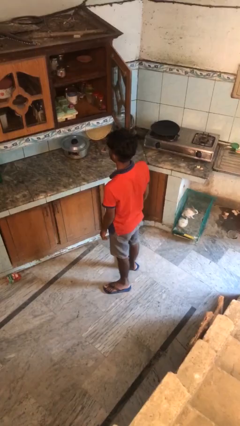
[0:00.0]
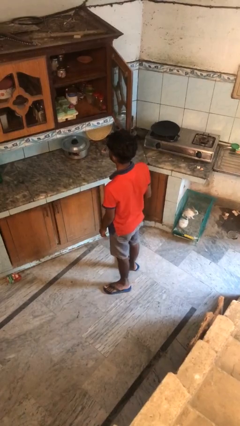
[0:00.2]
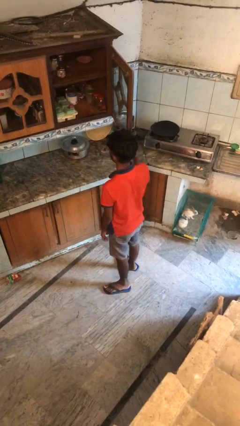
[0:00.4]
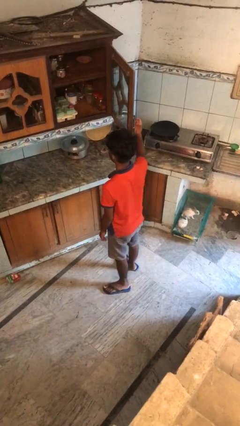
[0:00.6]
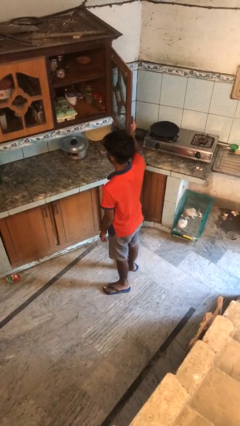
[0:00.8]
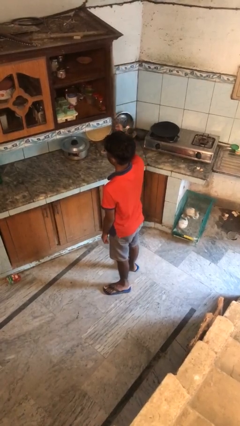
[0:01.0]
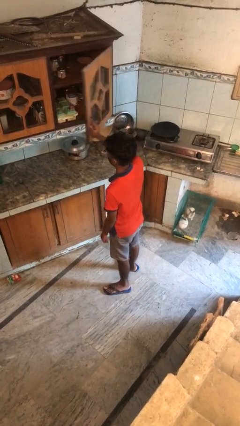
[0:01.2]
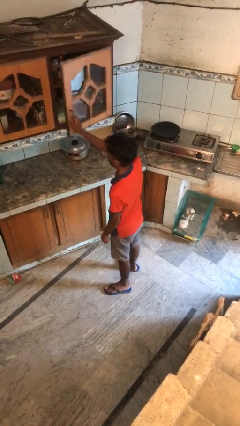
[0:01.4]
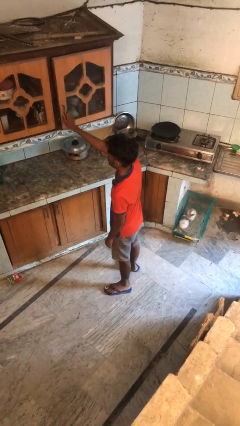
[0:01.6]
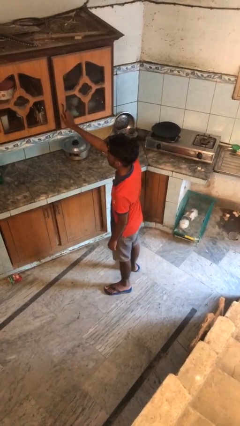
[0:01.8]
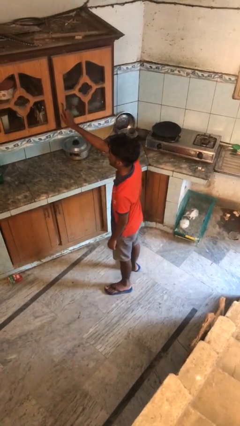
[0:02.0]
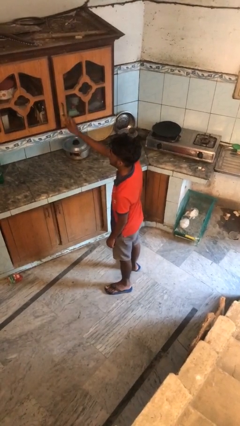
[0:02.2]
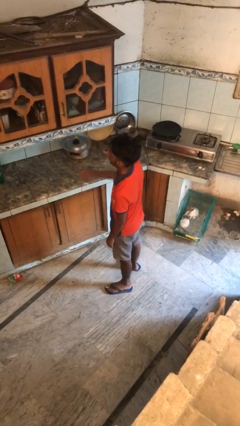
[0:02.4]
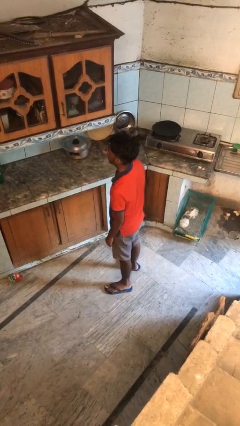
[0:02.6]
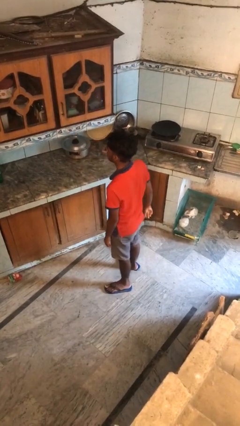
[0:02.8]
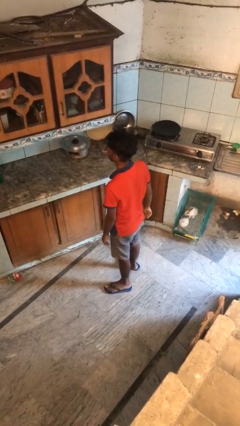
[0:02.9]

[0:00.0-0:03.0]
person closes cabinet

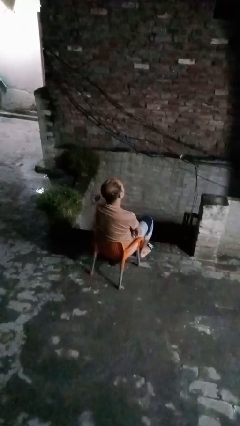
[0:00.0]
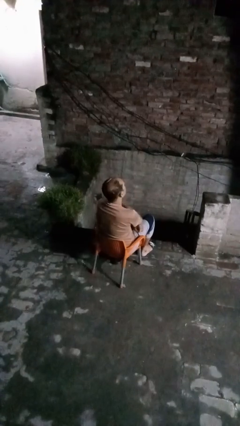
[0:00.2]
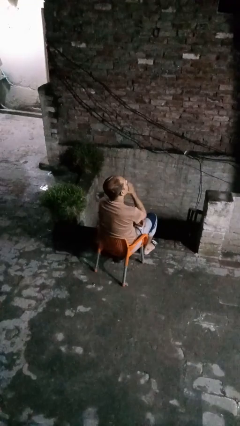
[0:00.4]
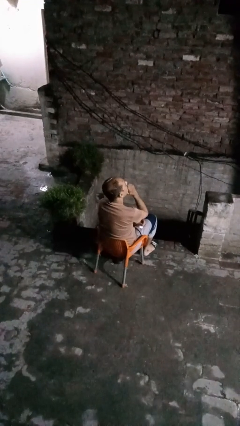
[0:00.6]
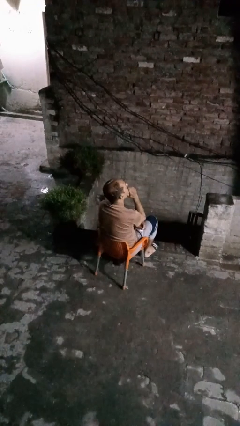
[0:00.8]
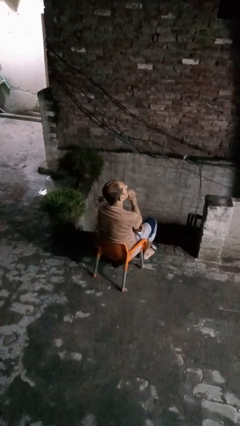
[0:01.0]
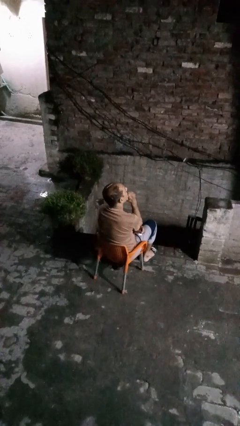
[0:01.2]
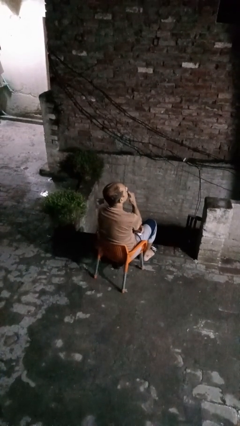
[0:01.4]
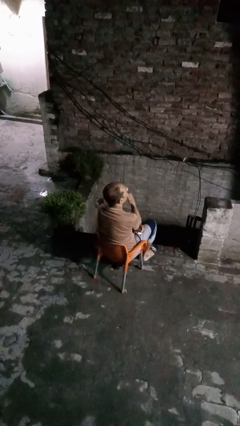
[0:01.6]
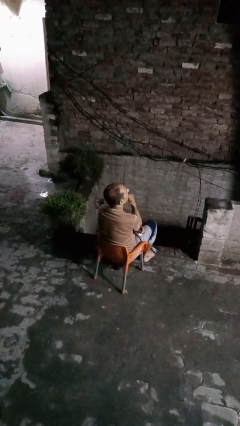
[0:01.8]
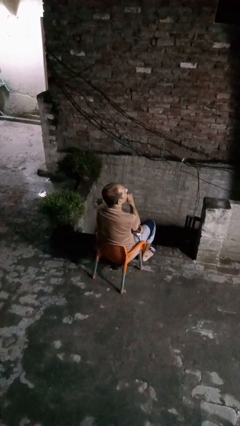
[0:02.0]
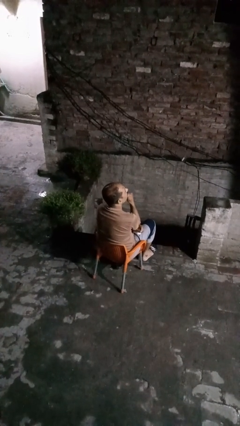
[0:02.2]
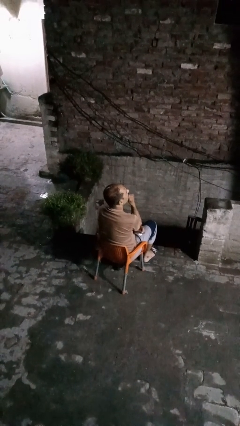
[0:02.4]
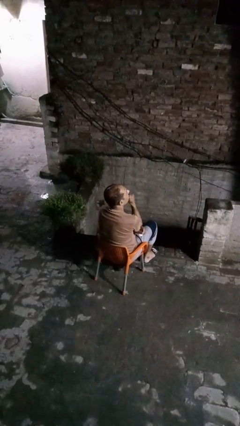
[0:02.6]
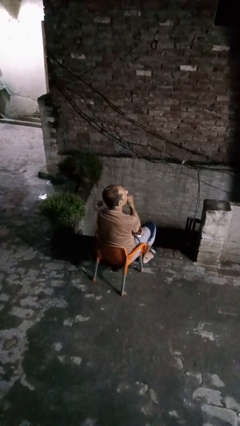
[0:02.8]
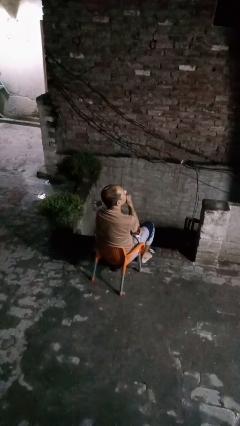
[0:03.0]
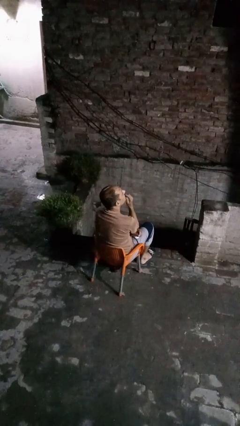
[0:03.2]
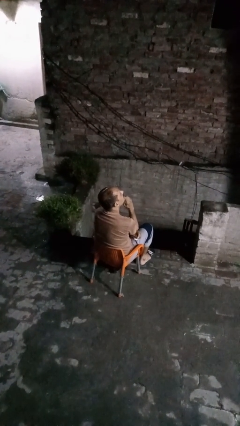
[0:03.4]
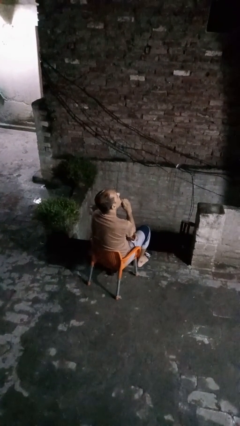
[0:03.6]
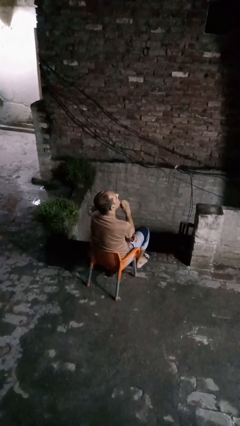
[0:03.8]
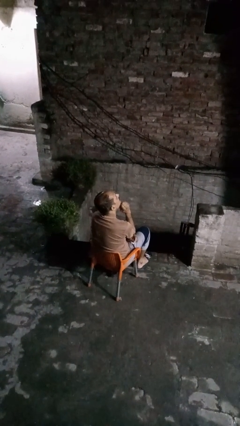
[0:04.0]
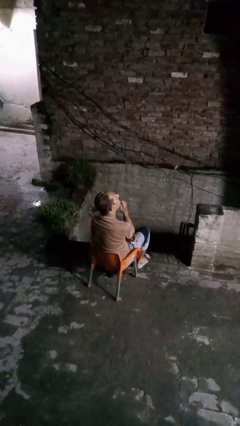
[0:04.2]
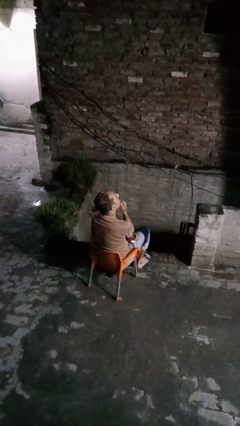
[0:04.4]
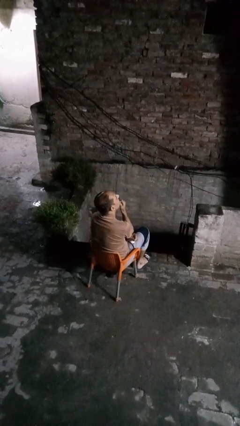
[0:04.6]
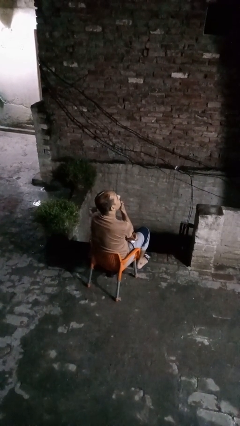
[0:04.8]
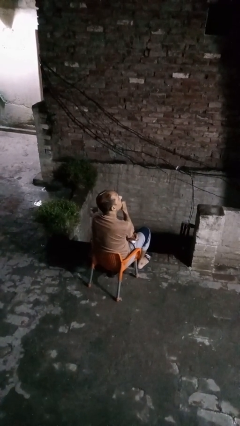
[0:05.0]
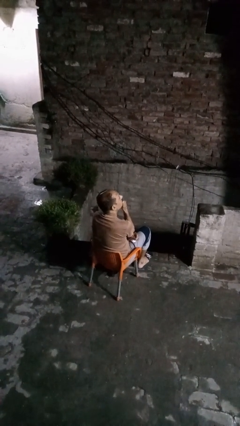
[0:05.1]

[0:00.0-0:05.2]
person strokes chin

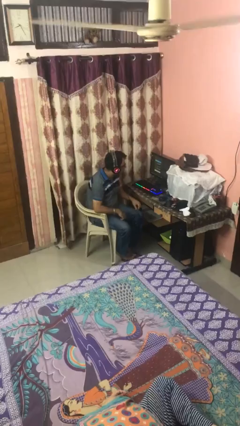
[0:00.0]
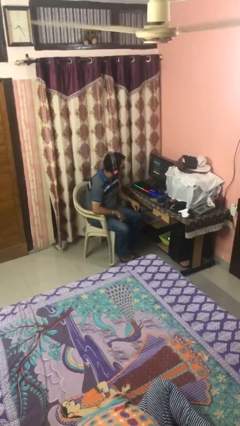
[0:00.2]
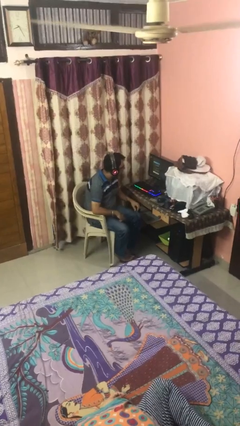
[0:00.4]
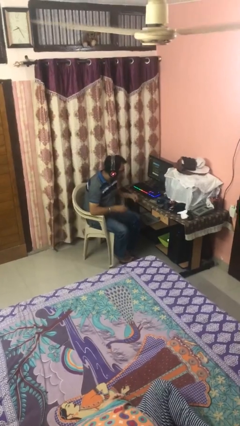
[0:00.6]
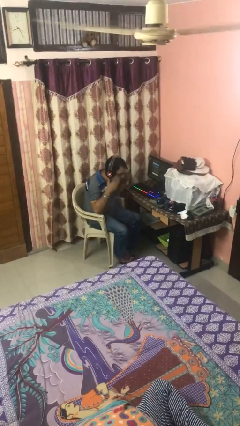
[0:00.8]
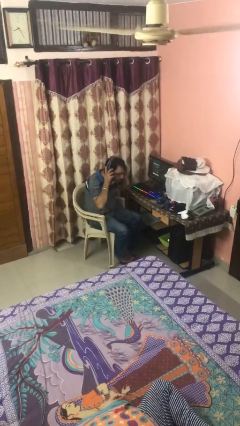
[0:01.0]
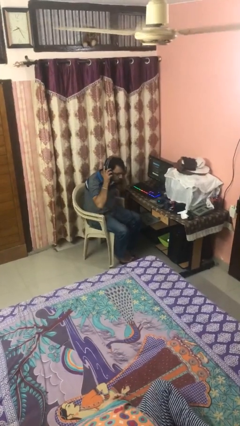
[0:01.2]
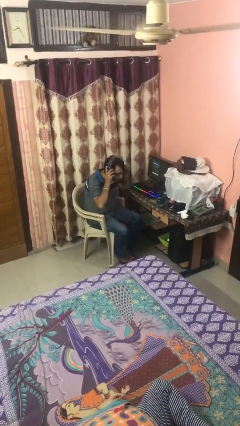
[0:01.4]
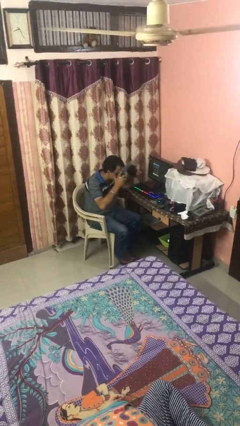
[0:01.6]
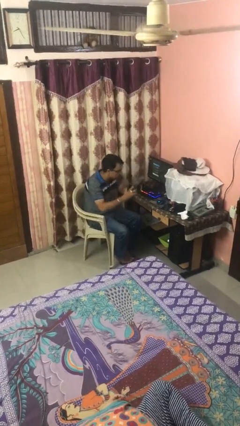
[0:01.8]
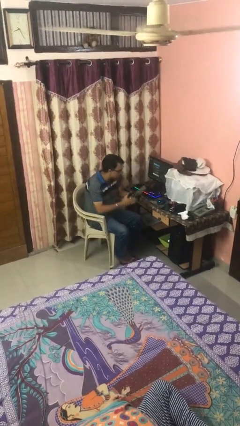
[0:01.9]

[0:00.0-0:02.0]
person takes off headphones

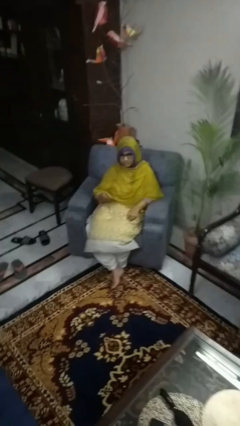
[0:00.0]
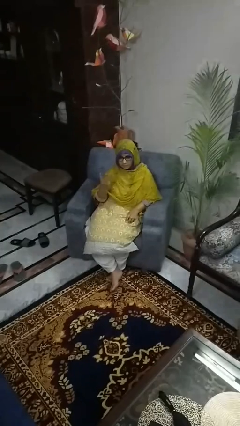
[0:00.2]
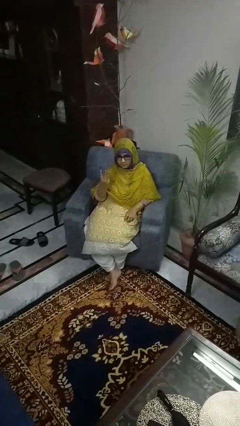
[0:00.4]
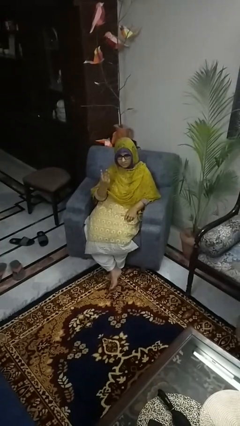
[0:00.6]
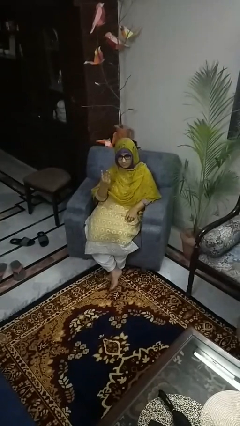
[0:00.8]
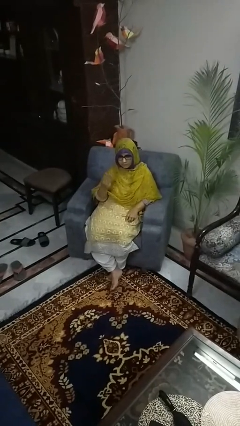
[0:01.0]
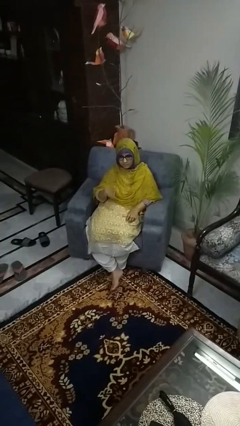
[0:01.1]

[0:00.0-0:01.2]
person gestures number three

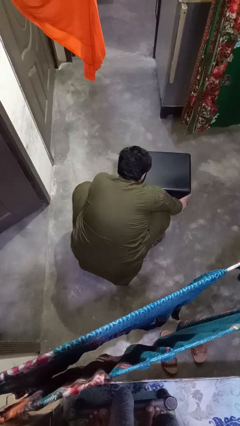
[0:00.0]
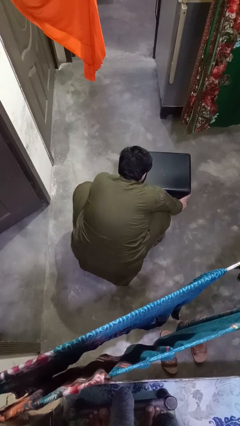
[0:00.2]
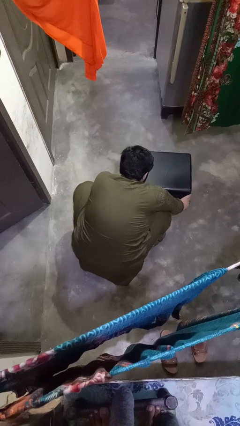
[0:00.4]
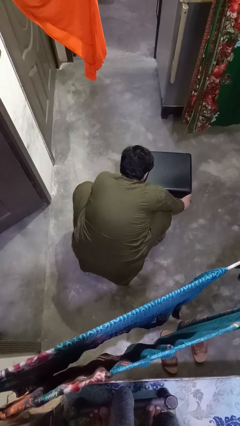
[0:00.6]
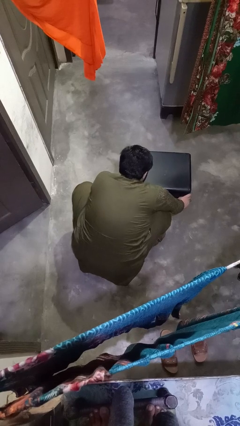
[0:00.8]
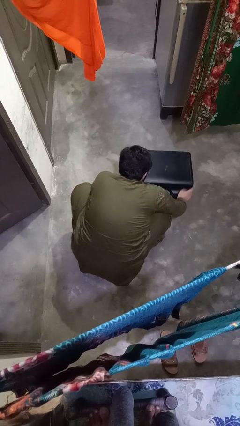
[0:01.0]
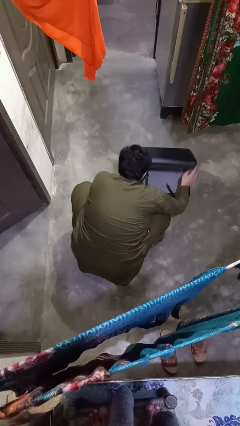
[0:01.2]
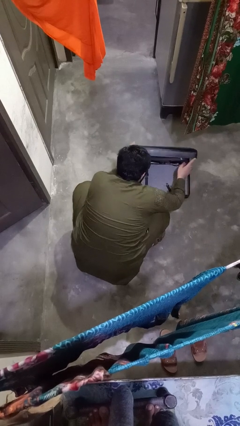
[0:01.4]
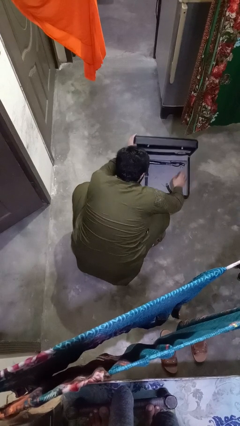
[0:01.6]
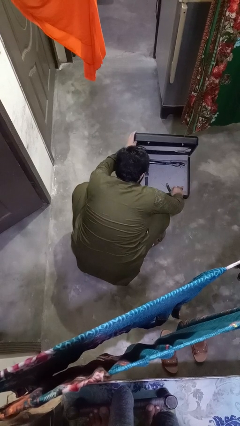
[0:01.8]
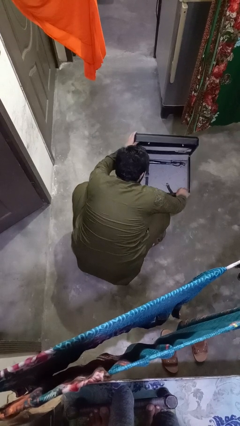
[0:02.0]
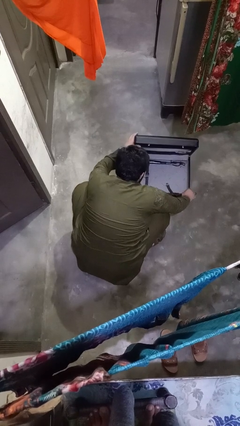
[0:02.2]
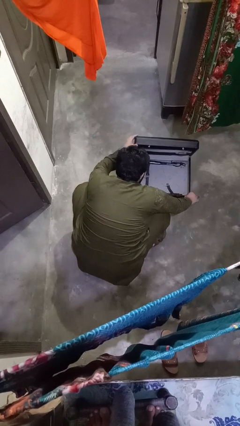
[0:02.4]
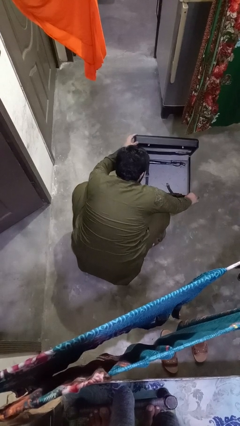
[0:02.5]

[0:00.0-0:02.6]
person opens suitcase

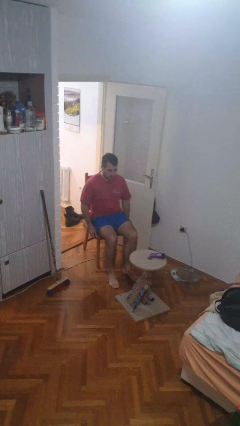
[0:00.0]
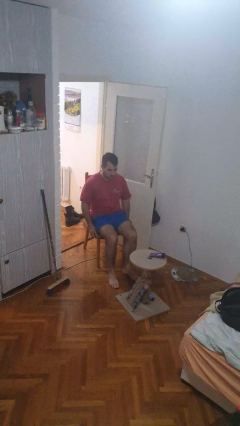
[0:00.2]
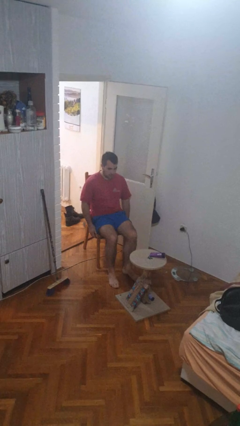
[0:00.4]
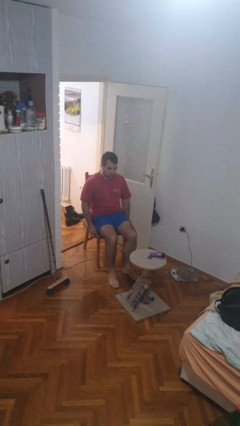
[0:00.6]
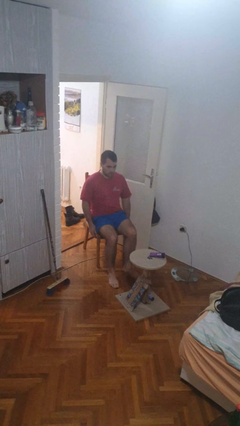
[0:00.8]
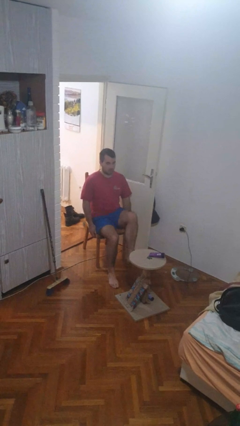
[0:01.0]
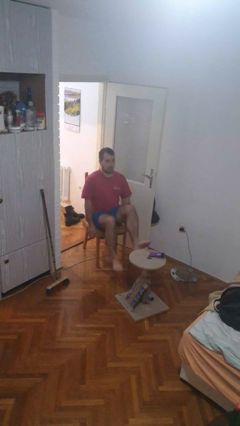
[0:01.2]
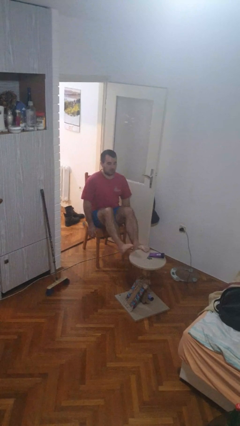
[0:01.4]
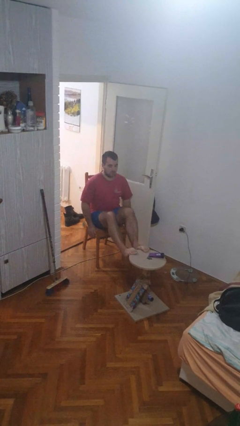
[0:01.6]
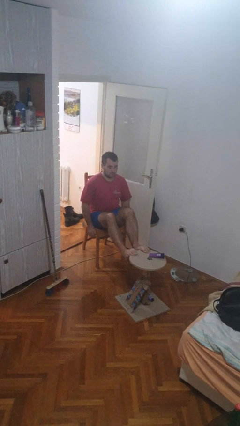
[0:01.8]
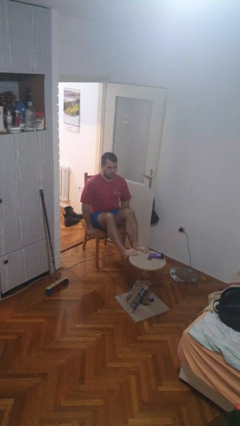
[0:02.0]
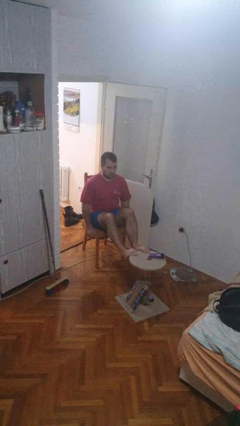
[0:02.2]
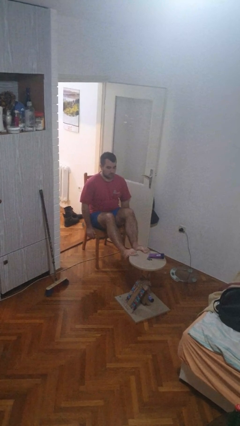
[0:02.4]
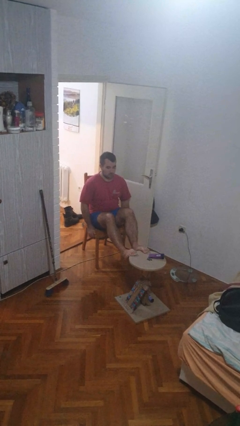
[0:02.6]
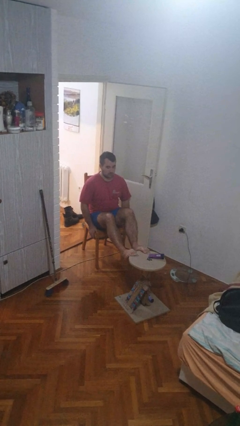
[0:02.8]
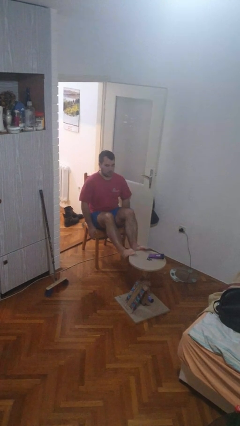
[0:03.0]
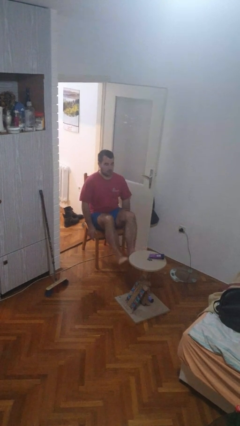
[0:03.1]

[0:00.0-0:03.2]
person puts feet up
